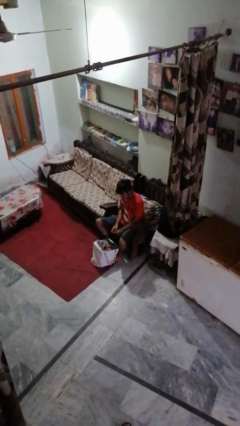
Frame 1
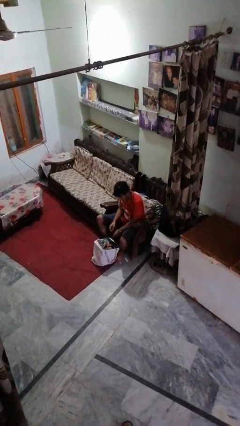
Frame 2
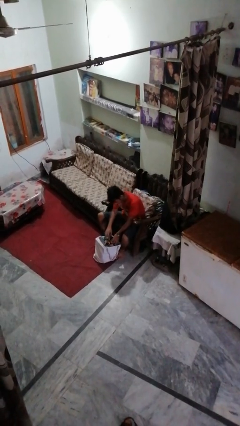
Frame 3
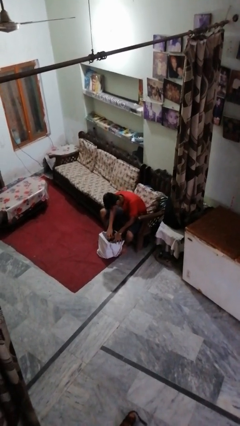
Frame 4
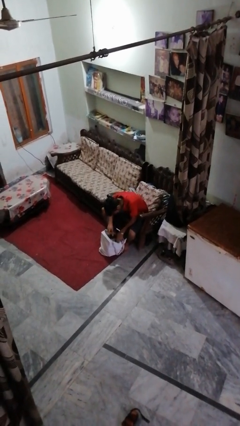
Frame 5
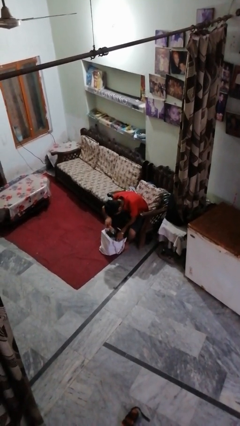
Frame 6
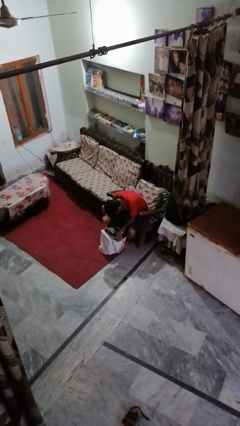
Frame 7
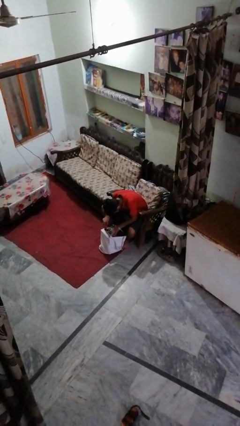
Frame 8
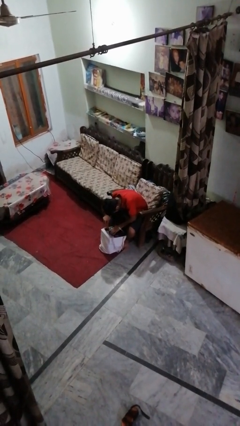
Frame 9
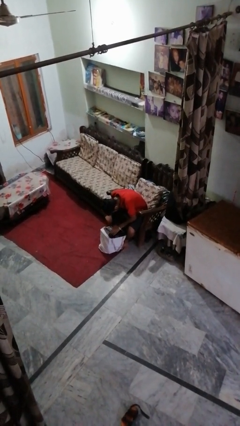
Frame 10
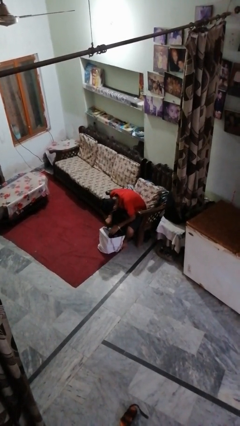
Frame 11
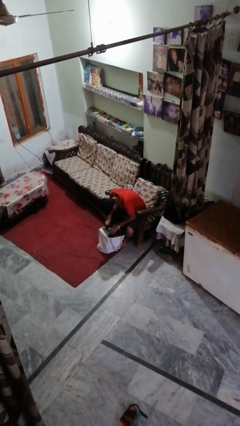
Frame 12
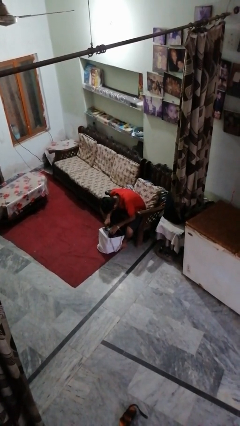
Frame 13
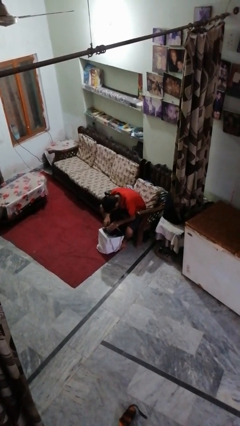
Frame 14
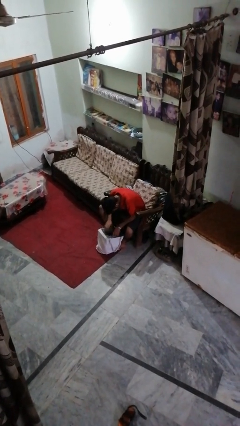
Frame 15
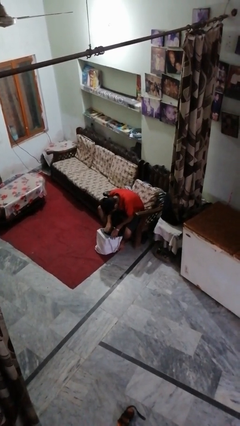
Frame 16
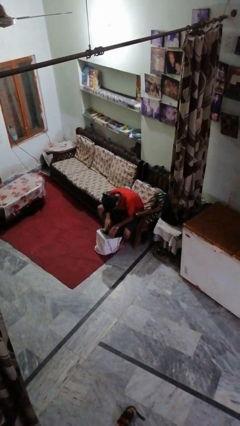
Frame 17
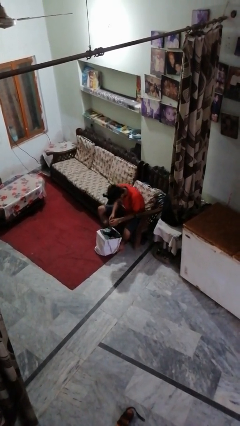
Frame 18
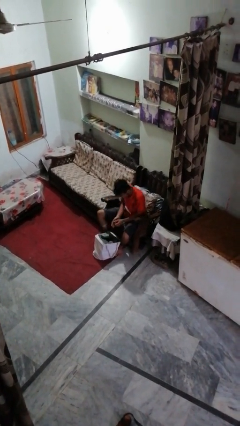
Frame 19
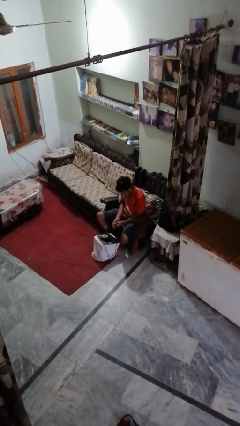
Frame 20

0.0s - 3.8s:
person searches under bed

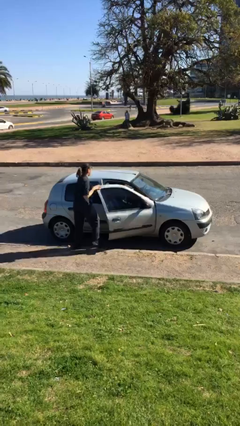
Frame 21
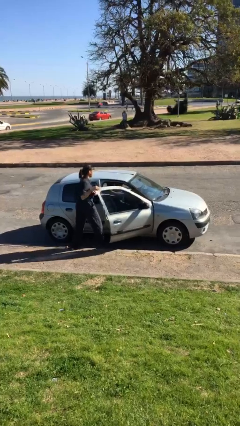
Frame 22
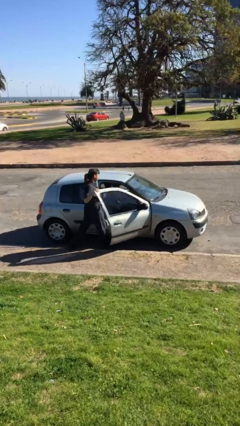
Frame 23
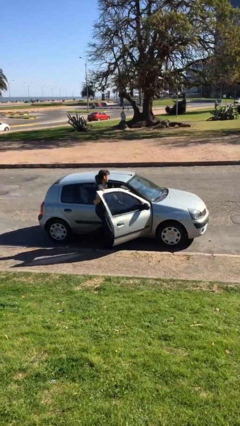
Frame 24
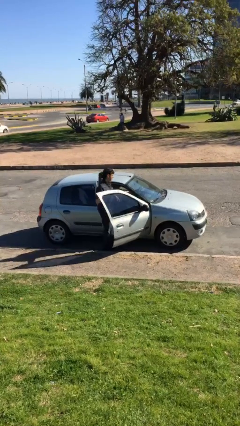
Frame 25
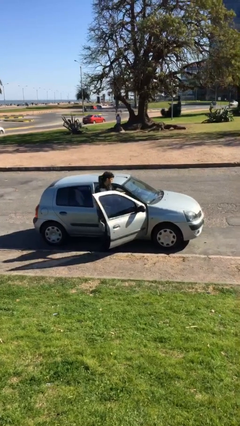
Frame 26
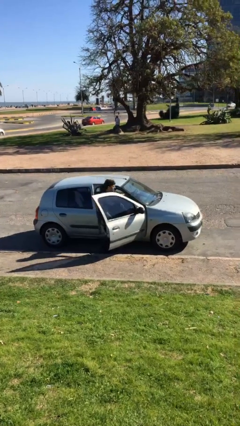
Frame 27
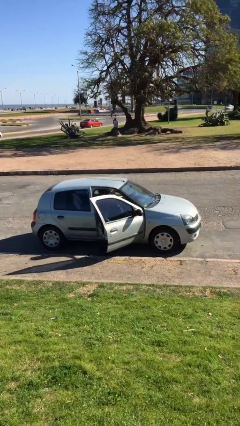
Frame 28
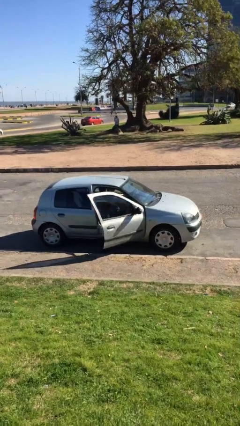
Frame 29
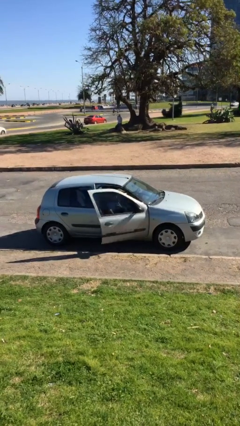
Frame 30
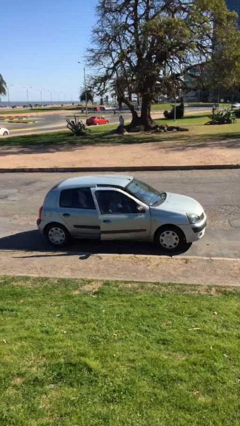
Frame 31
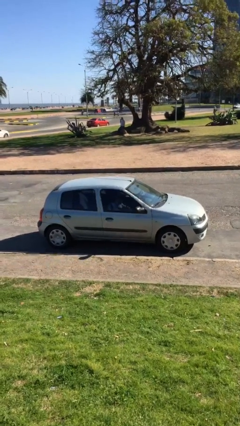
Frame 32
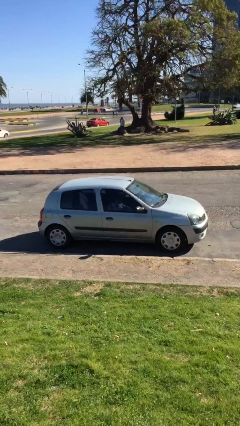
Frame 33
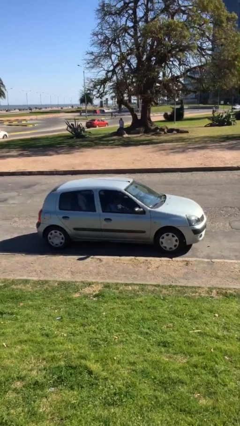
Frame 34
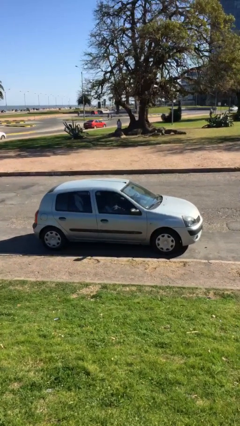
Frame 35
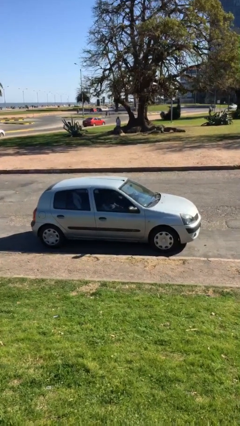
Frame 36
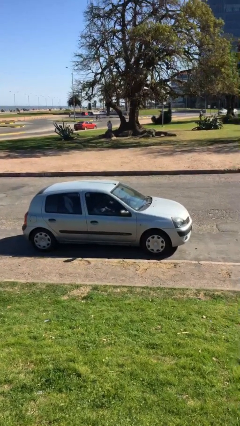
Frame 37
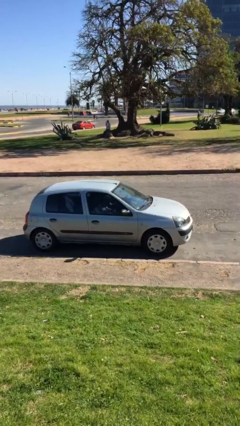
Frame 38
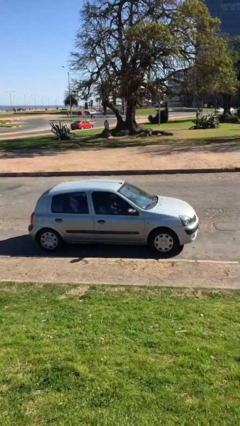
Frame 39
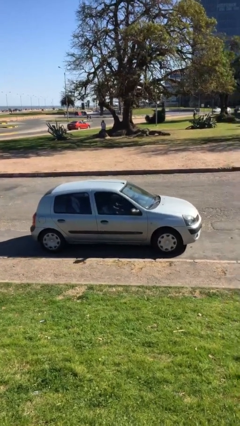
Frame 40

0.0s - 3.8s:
car picks up person

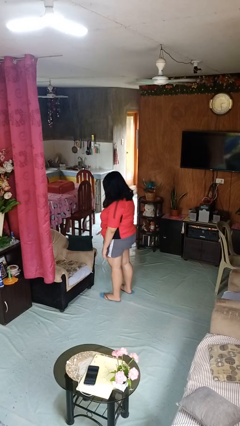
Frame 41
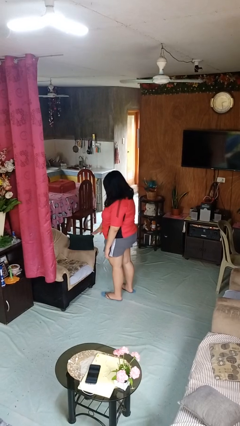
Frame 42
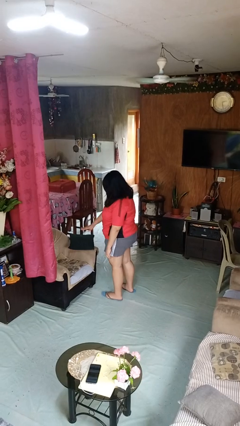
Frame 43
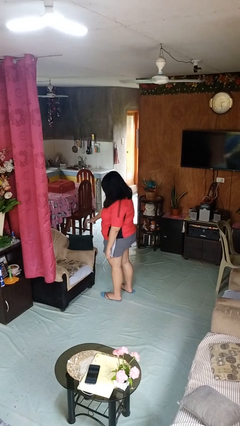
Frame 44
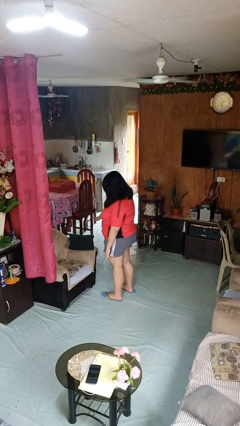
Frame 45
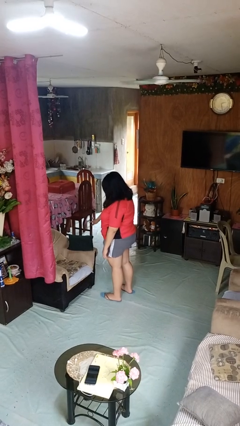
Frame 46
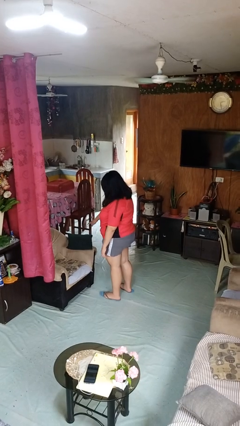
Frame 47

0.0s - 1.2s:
person waves hand over object

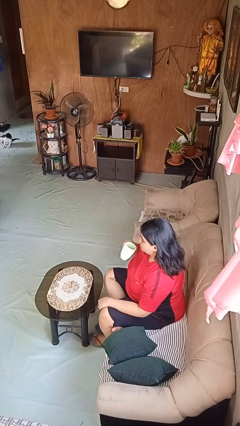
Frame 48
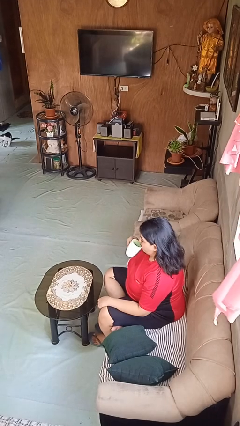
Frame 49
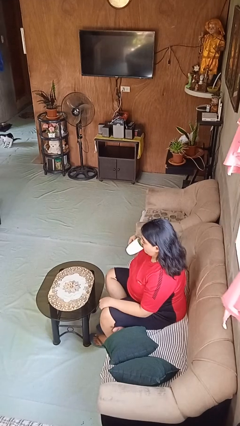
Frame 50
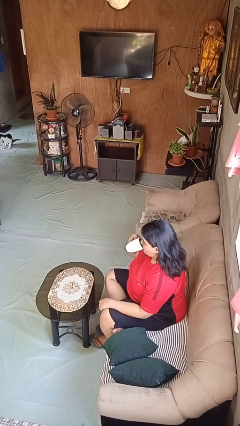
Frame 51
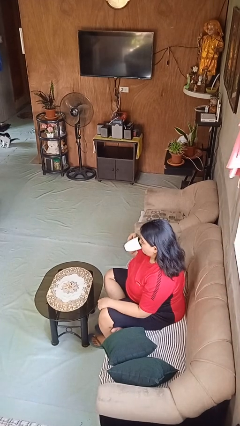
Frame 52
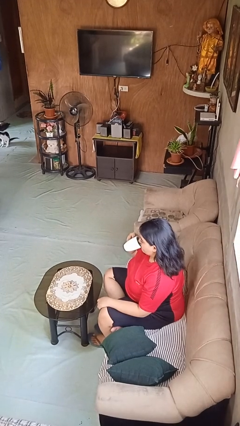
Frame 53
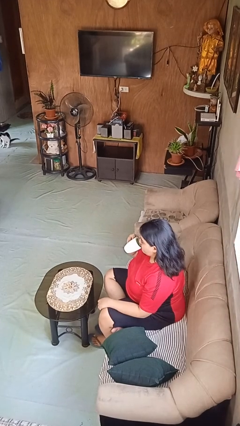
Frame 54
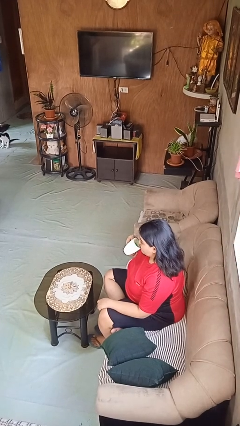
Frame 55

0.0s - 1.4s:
person drinks from mug

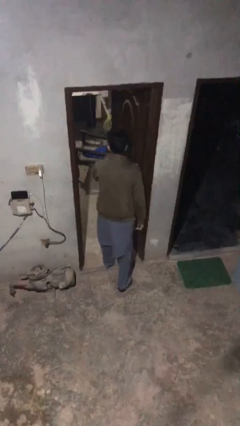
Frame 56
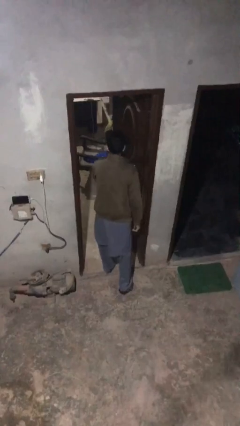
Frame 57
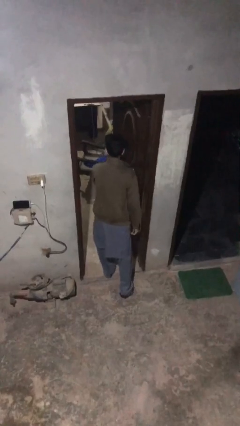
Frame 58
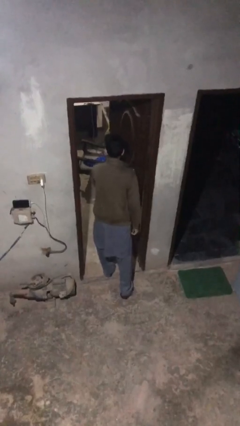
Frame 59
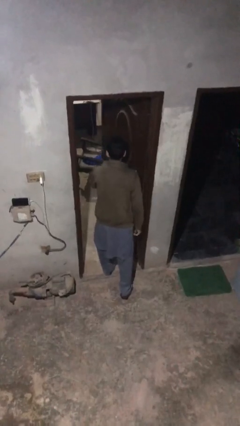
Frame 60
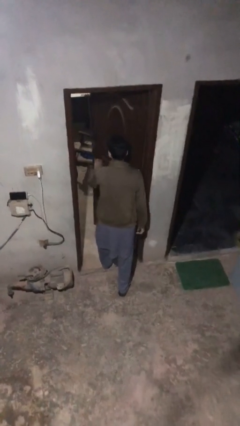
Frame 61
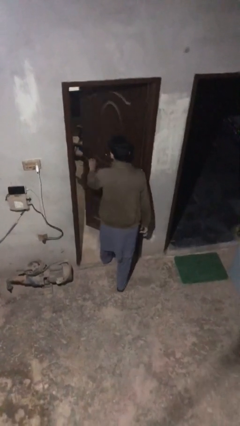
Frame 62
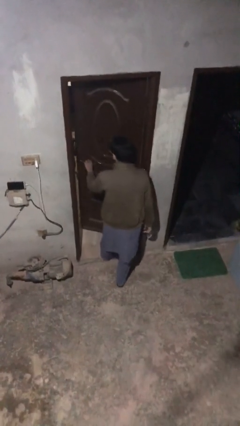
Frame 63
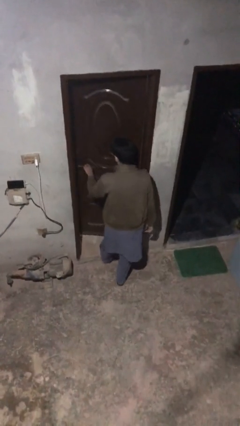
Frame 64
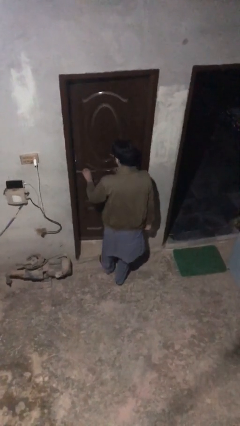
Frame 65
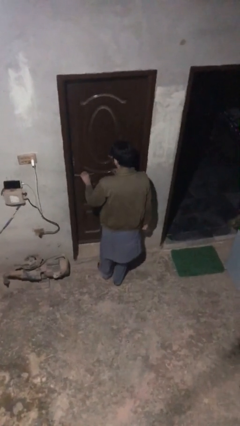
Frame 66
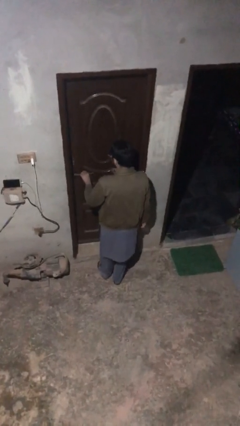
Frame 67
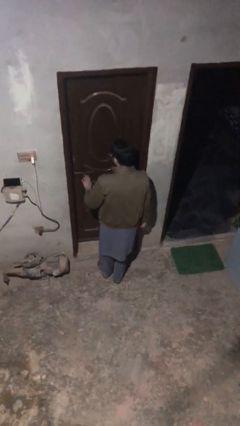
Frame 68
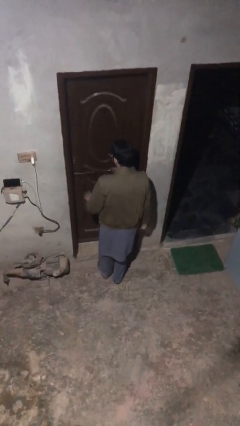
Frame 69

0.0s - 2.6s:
person closes facility door

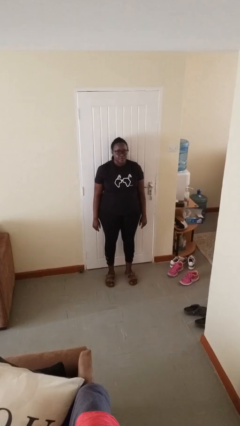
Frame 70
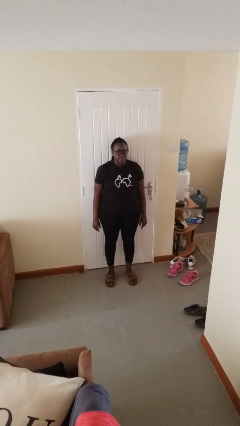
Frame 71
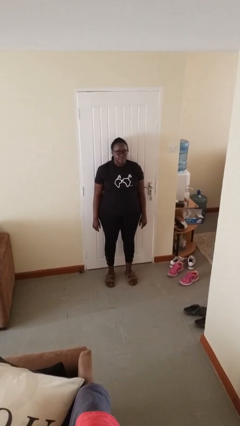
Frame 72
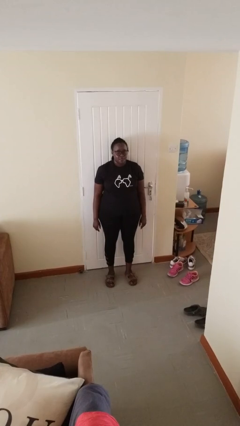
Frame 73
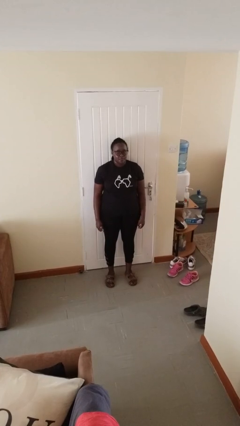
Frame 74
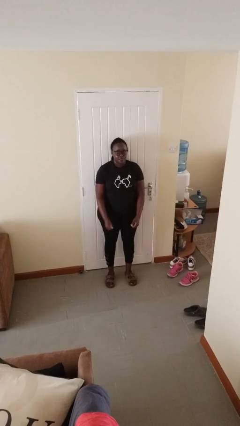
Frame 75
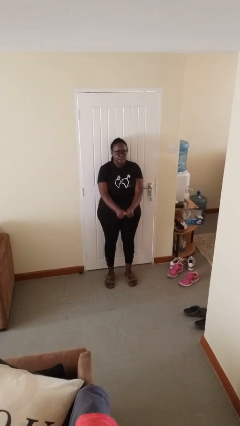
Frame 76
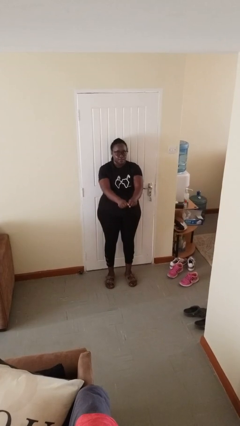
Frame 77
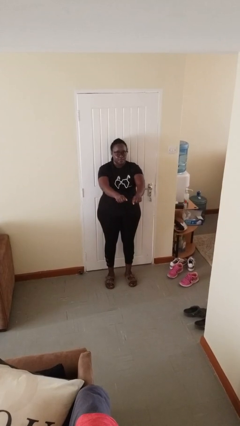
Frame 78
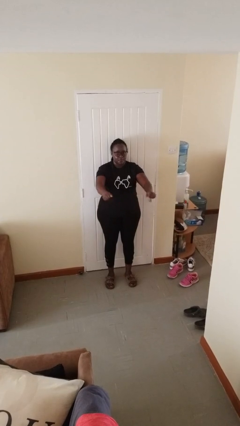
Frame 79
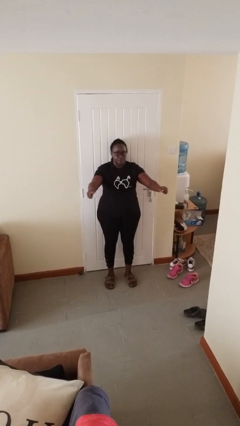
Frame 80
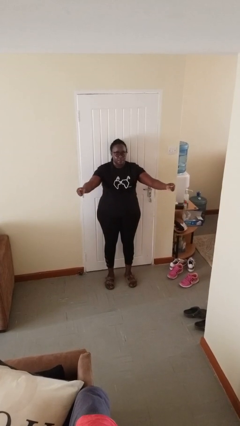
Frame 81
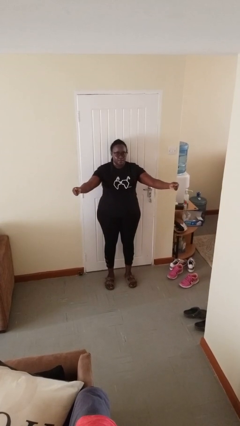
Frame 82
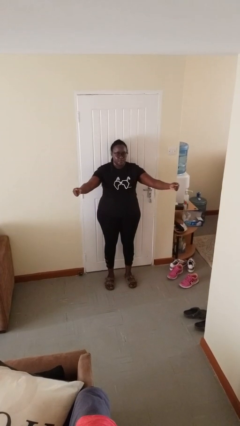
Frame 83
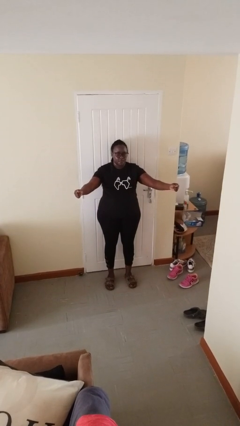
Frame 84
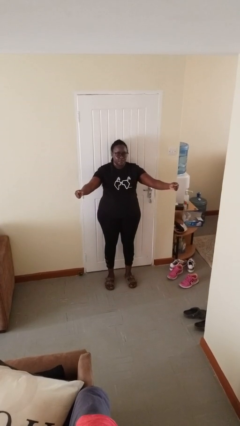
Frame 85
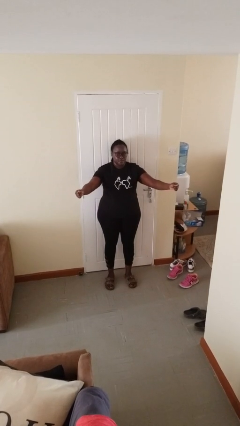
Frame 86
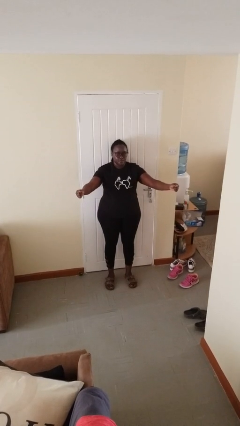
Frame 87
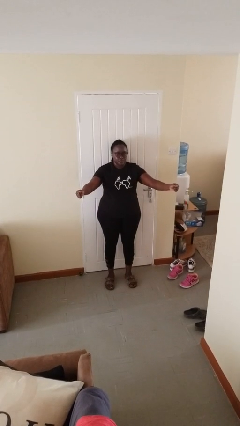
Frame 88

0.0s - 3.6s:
person gestures zoom in

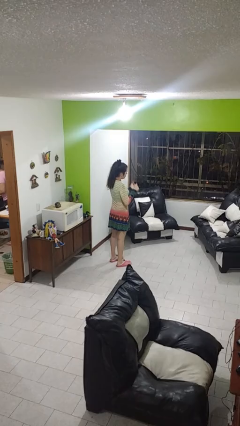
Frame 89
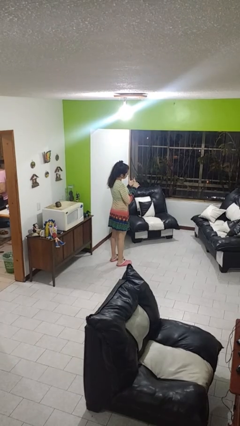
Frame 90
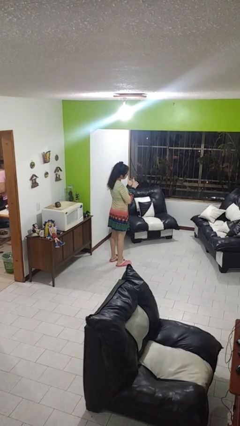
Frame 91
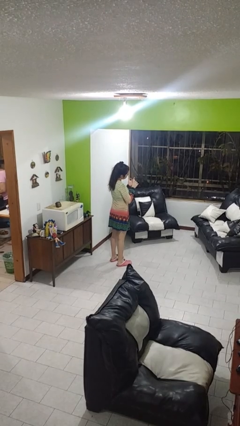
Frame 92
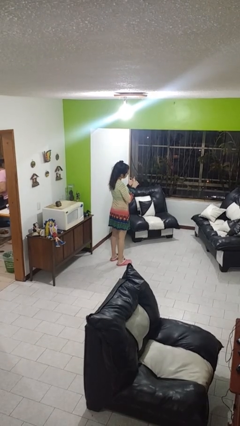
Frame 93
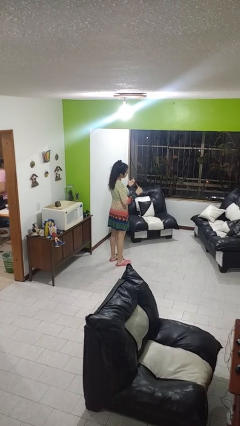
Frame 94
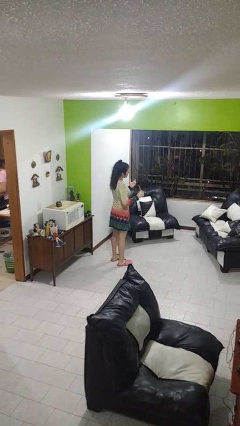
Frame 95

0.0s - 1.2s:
person files fingernails
